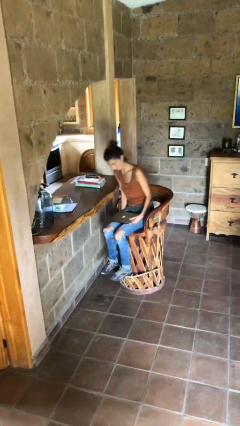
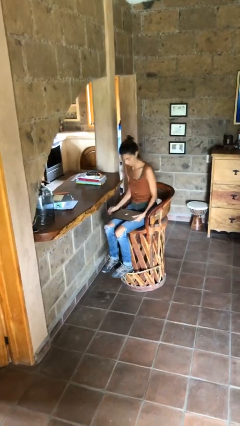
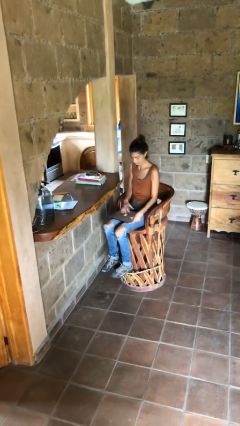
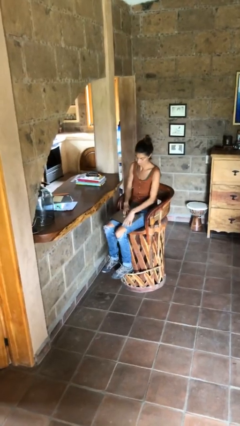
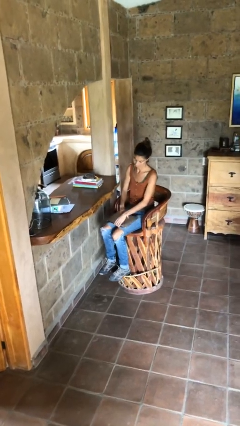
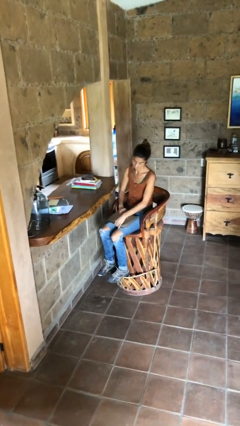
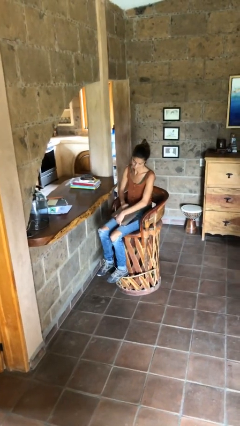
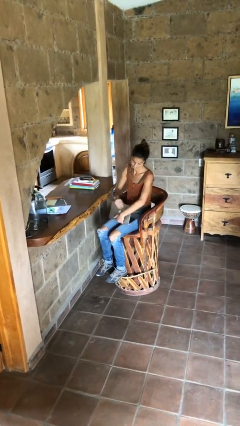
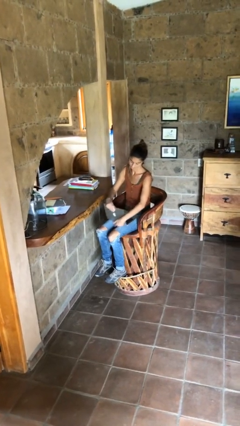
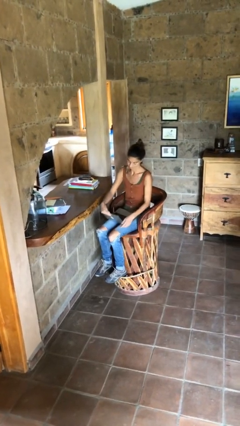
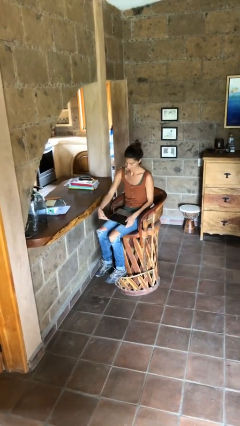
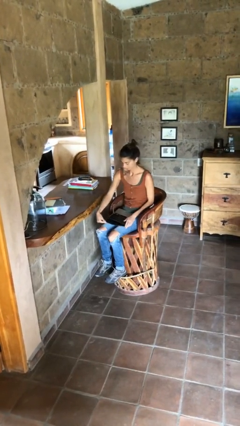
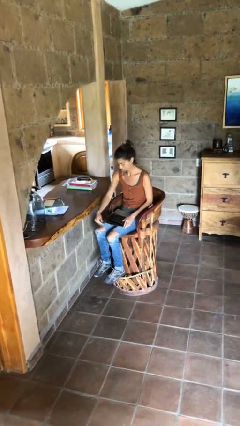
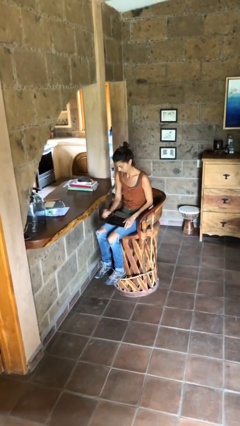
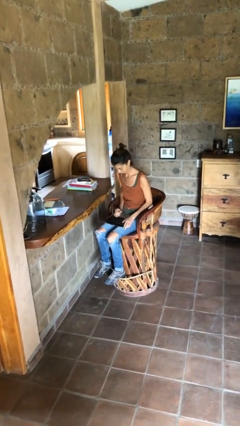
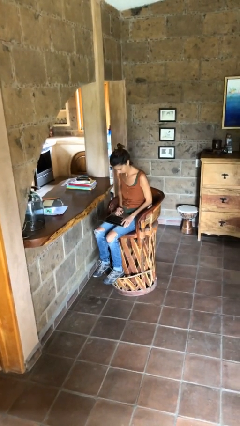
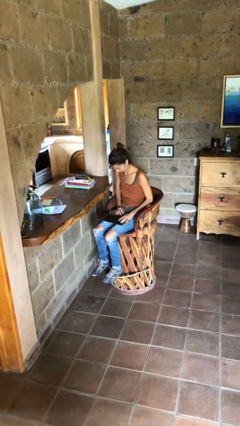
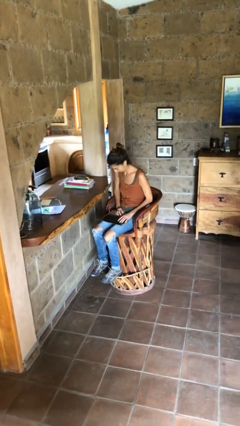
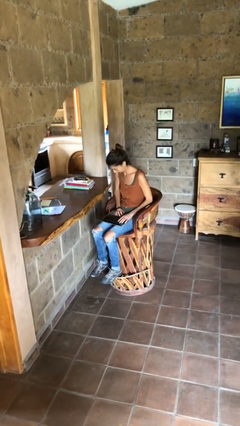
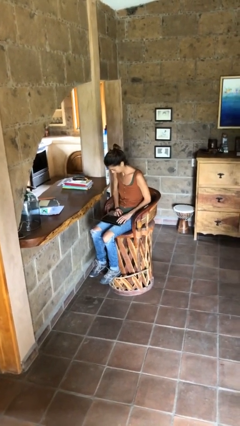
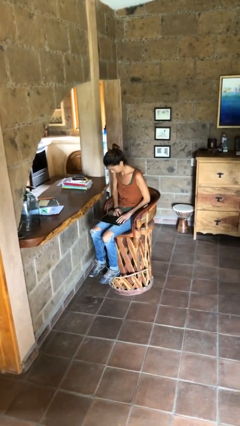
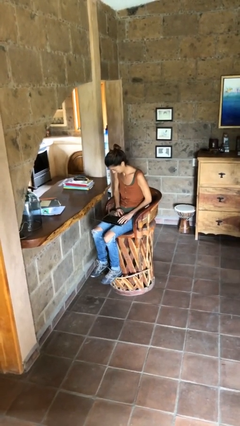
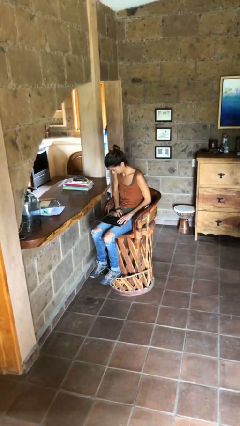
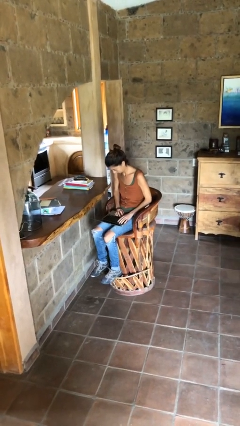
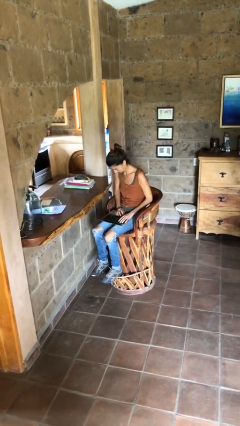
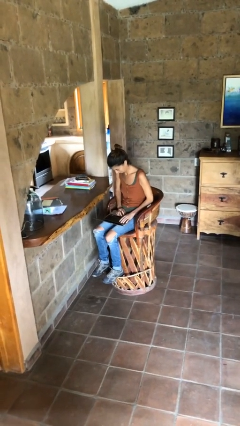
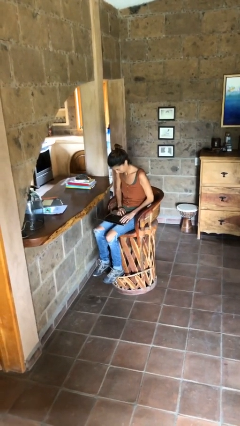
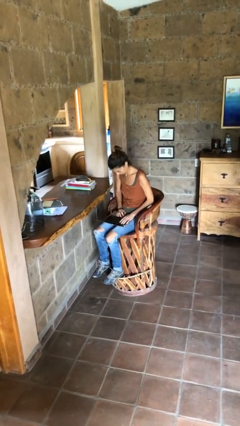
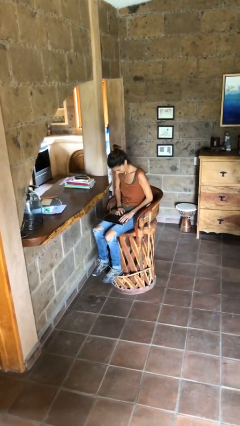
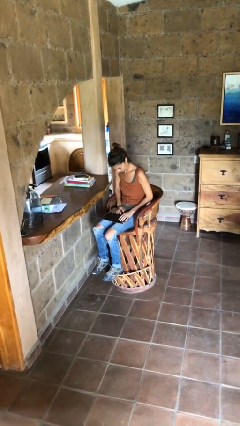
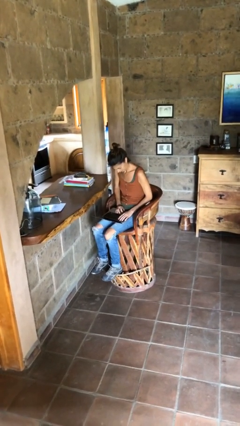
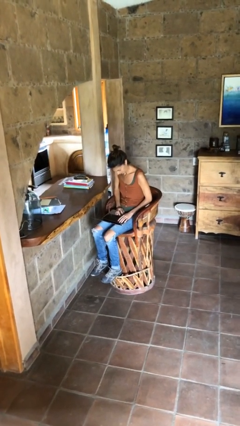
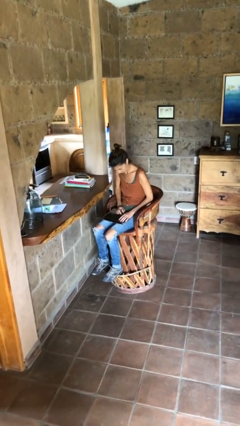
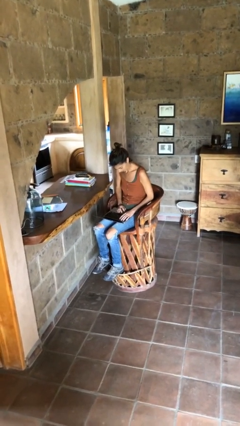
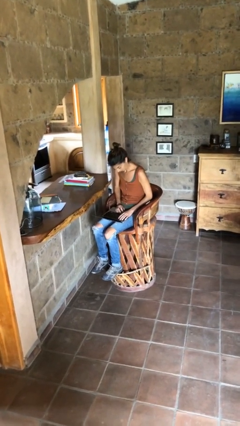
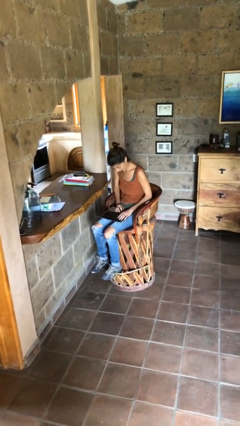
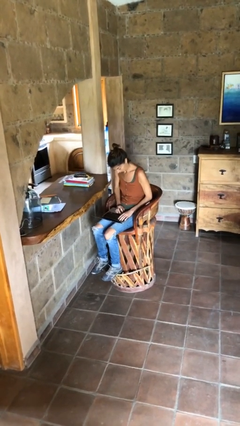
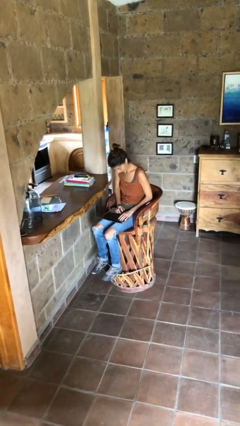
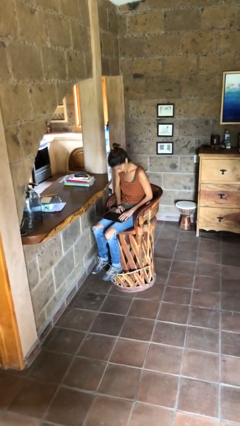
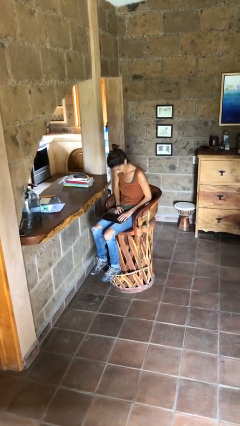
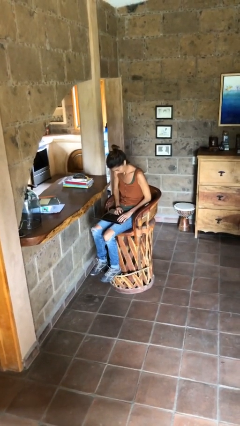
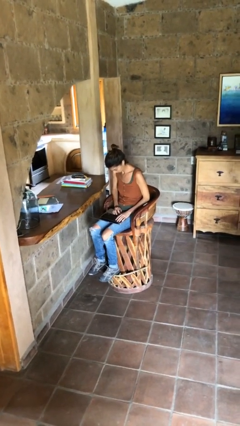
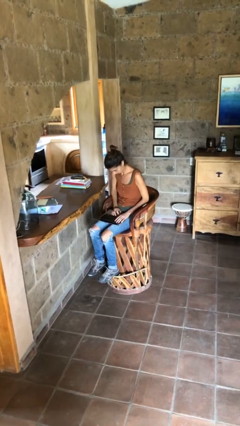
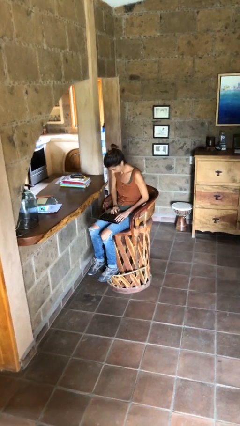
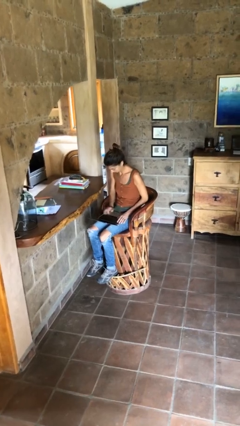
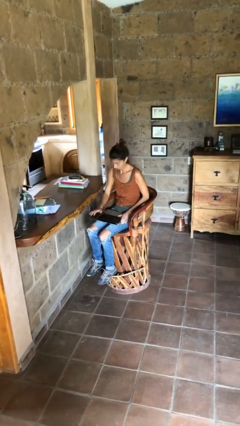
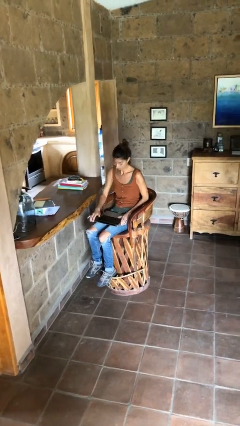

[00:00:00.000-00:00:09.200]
person interacts with laptop

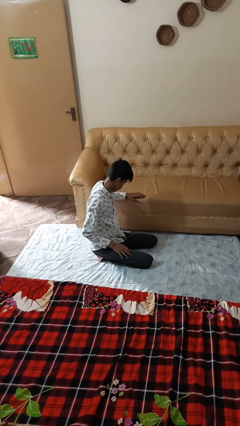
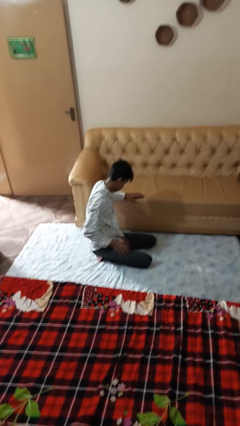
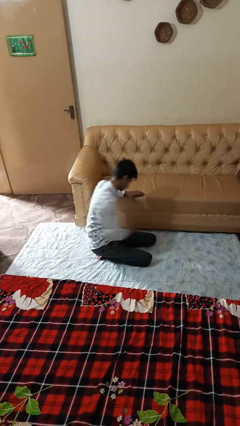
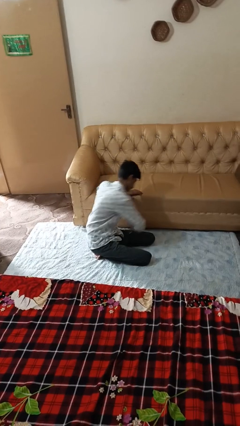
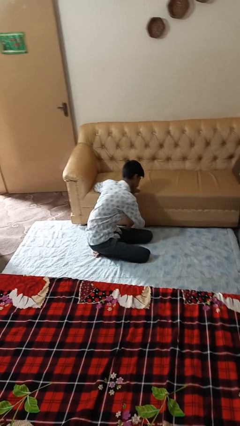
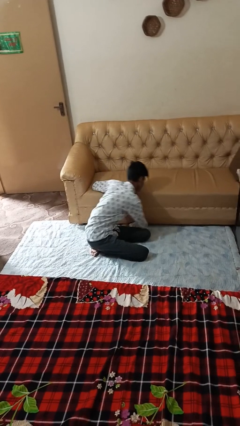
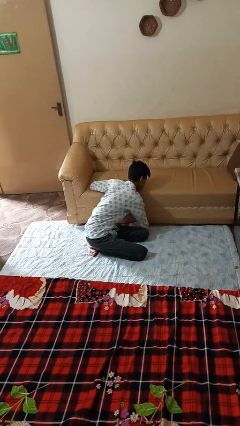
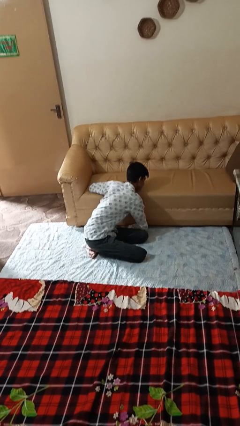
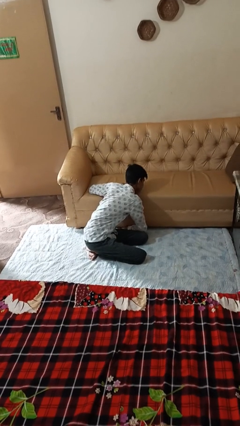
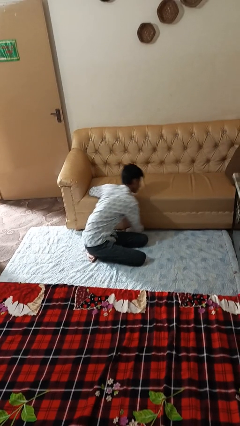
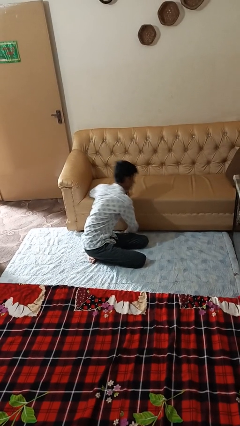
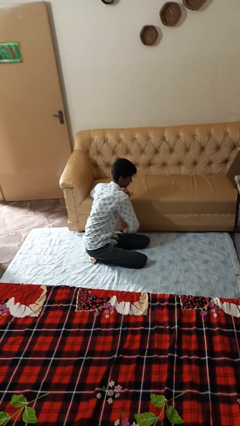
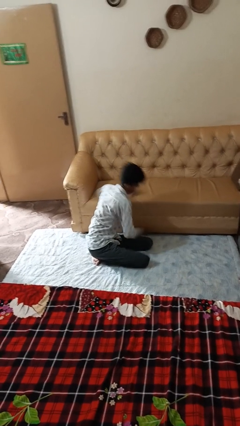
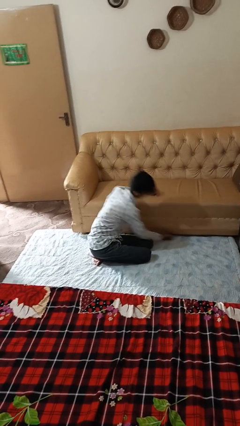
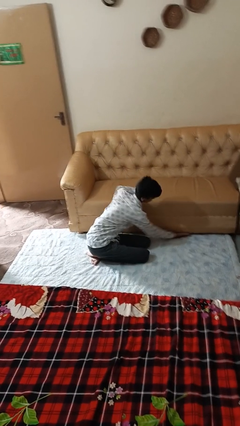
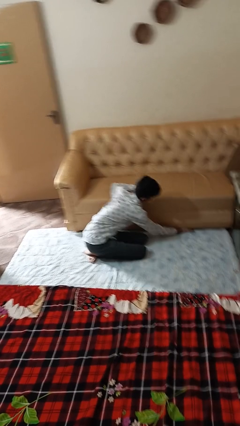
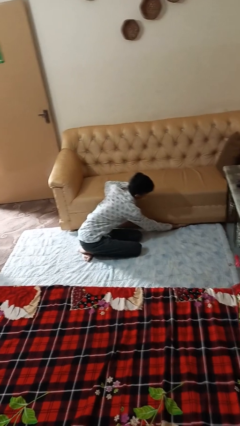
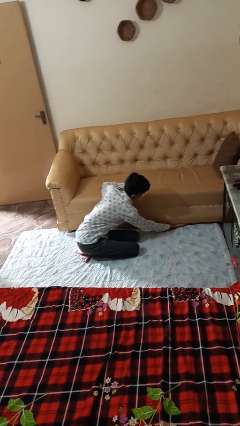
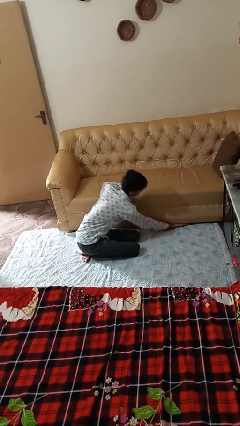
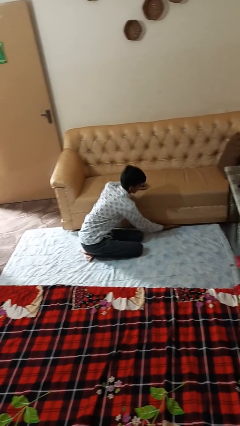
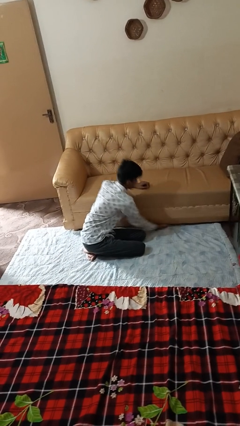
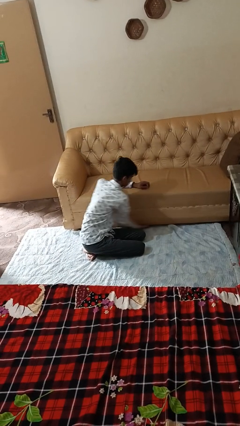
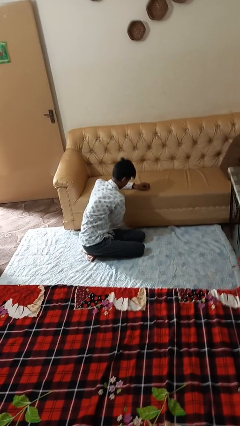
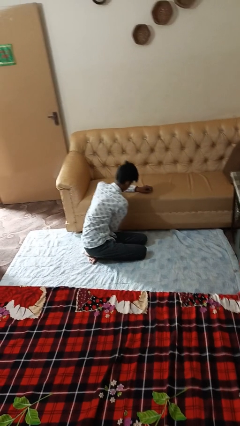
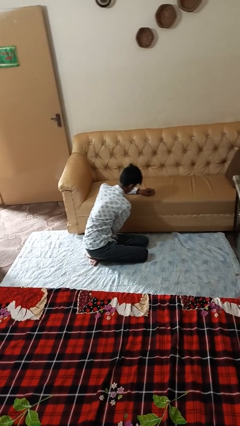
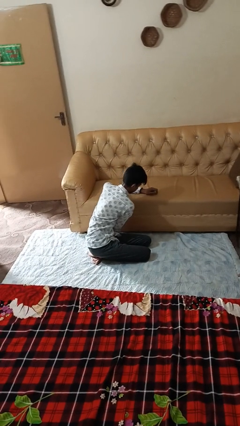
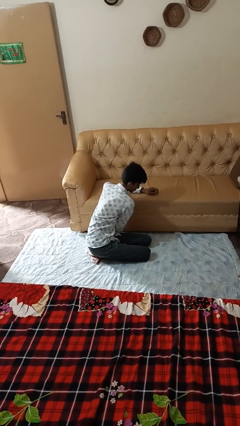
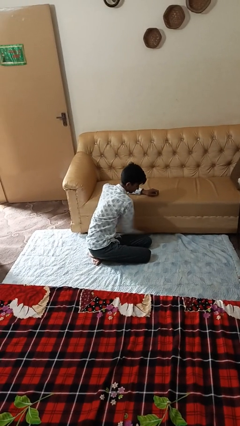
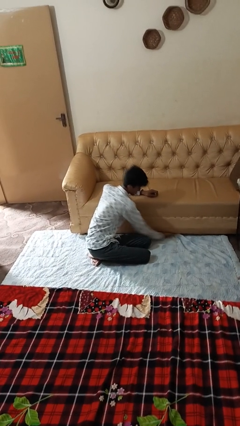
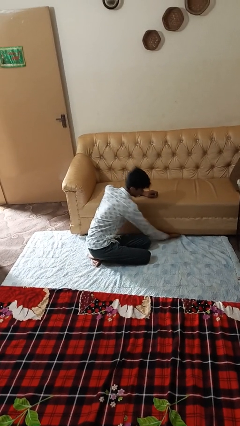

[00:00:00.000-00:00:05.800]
person searches under couch

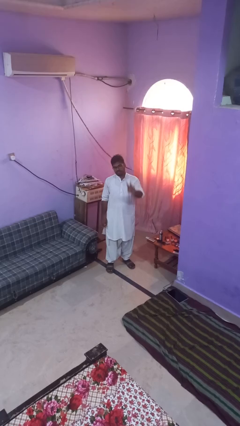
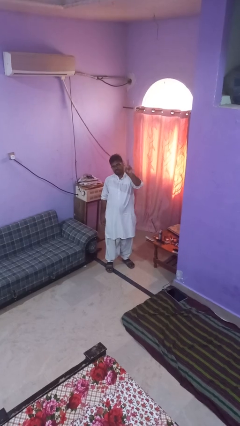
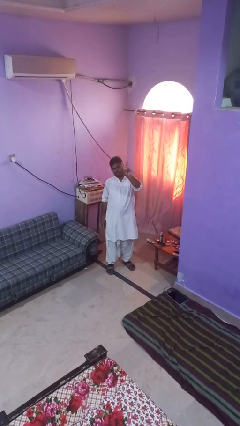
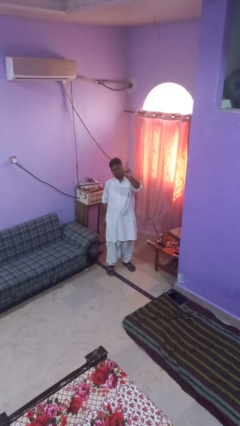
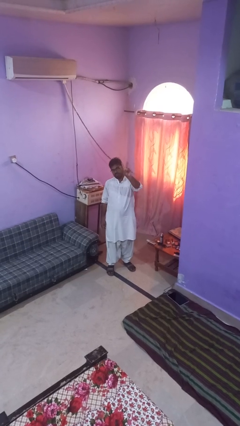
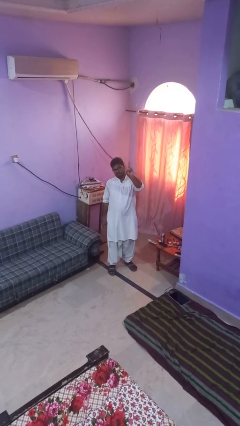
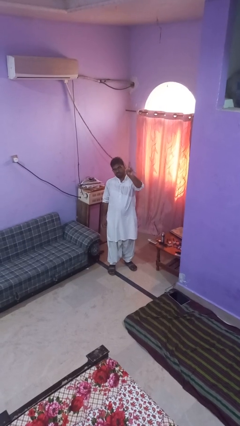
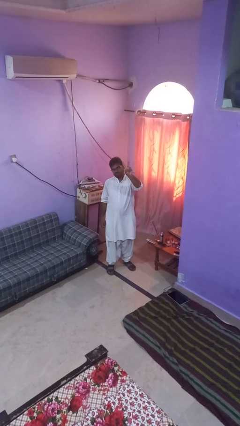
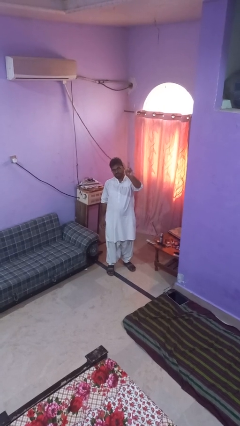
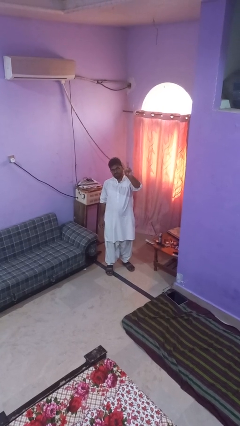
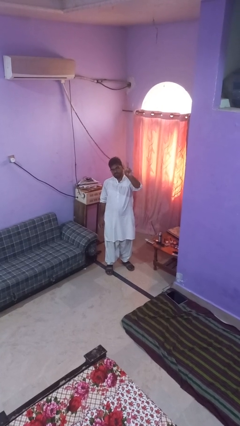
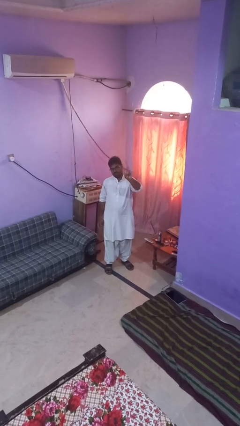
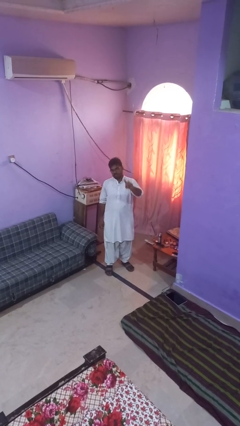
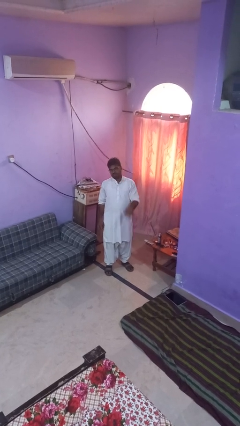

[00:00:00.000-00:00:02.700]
person gestures peace

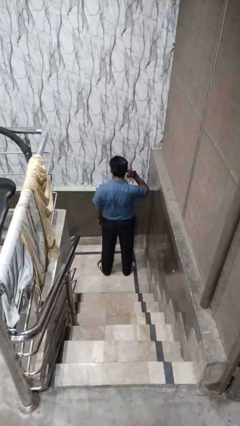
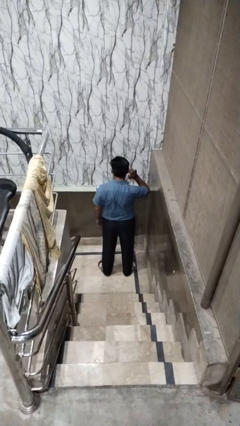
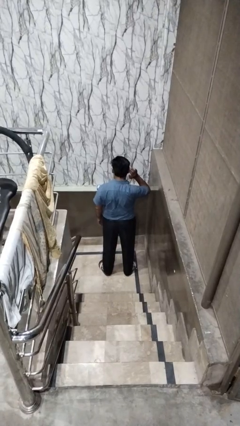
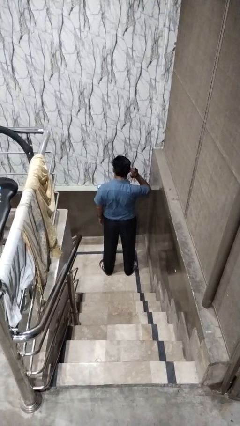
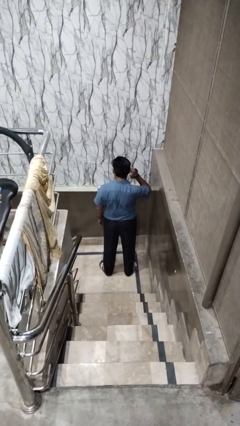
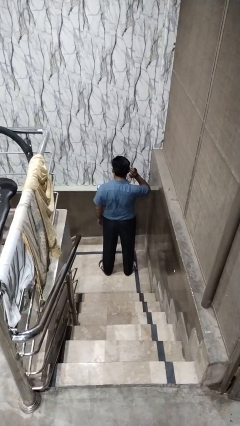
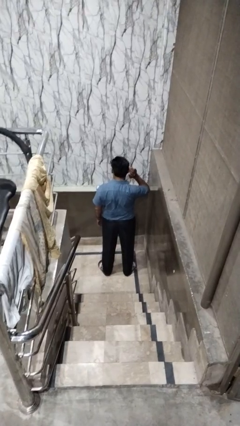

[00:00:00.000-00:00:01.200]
person gestures listen closely
